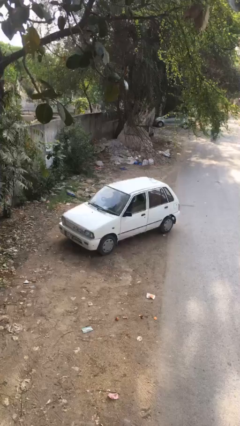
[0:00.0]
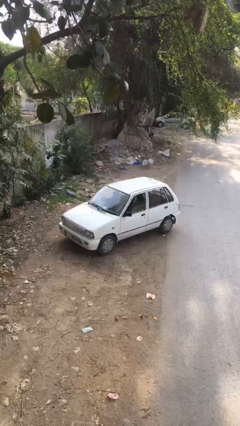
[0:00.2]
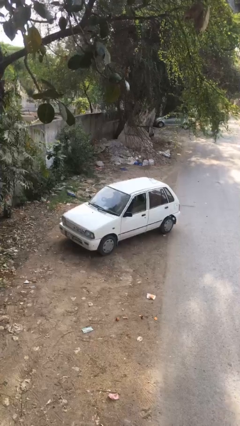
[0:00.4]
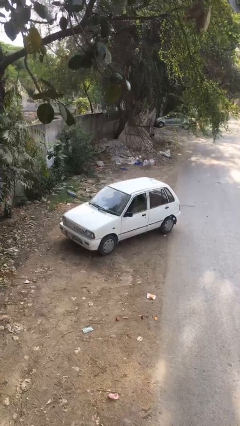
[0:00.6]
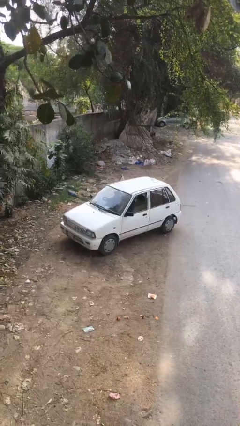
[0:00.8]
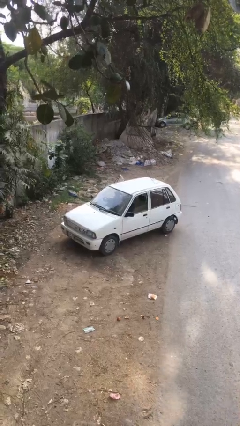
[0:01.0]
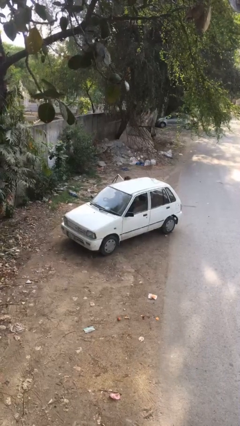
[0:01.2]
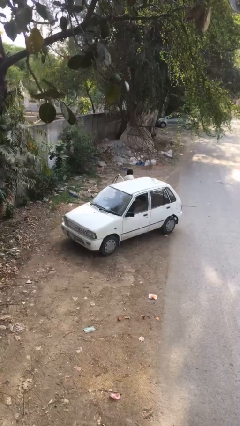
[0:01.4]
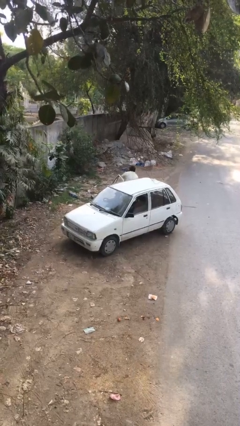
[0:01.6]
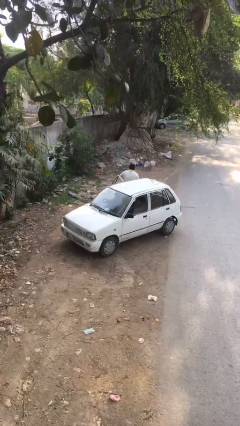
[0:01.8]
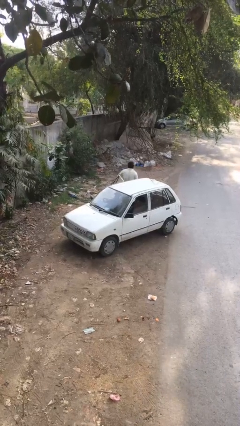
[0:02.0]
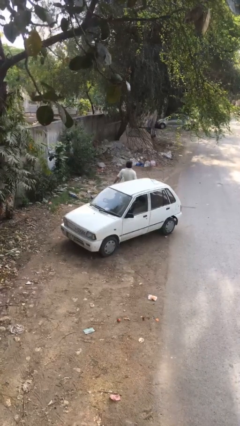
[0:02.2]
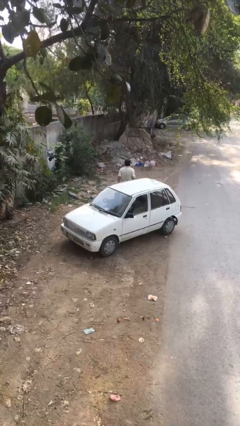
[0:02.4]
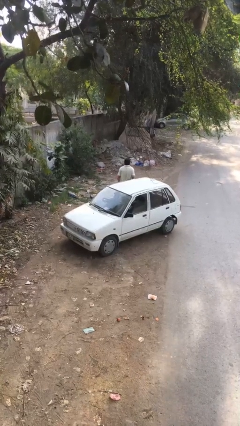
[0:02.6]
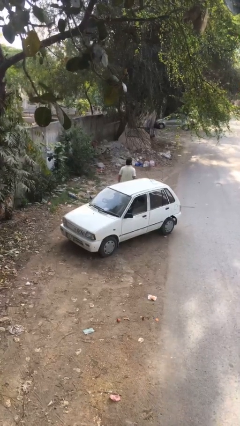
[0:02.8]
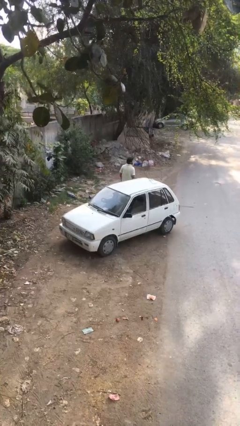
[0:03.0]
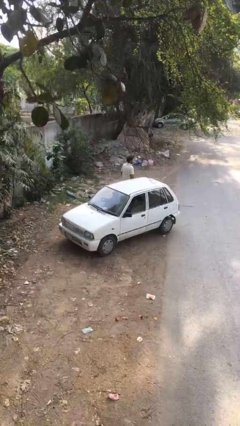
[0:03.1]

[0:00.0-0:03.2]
car drops off person

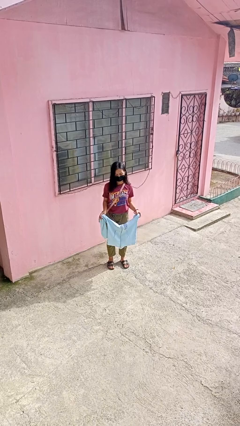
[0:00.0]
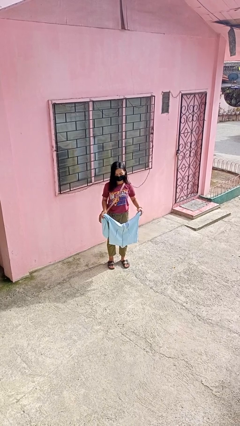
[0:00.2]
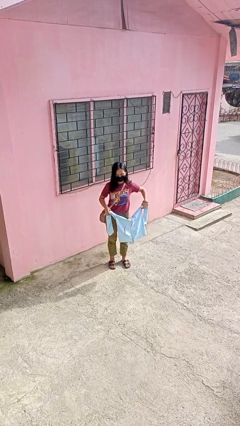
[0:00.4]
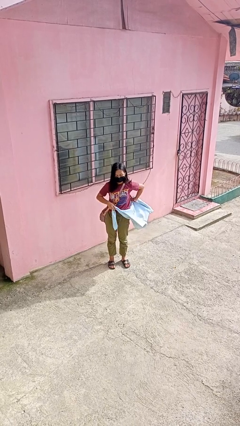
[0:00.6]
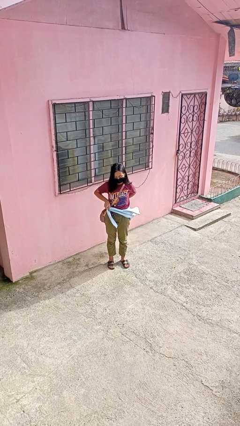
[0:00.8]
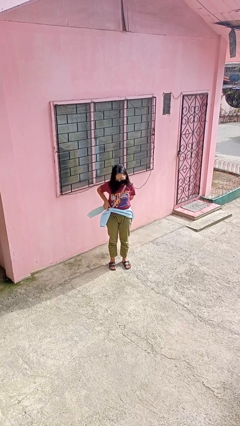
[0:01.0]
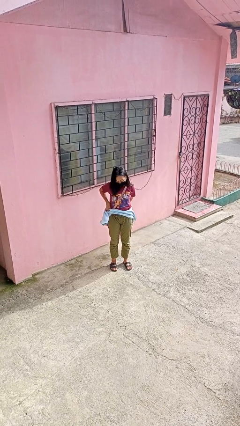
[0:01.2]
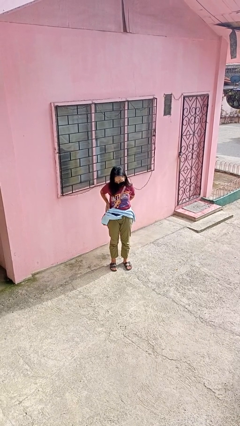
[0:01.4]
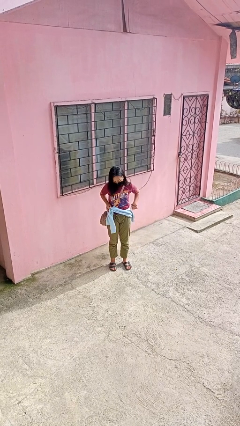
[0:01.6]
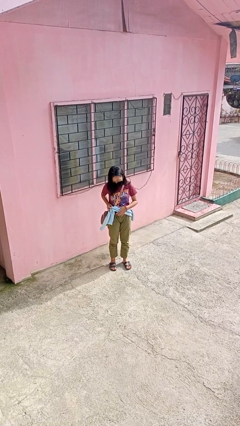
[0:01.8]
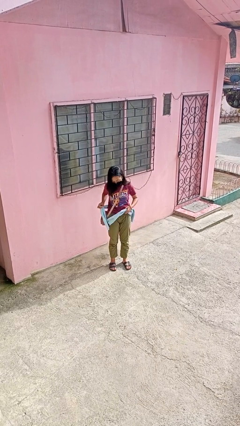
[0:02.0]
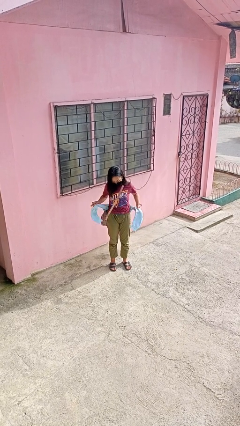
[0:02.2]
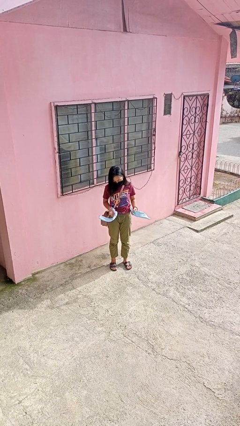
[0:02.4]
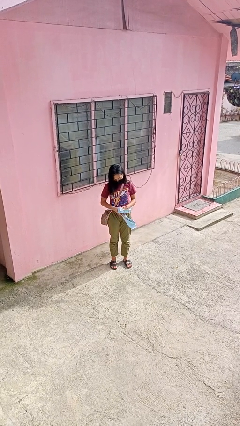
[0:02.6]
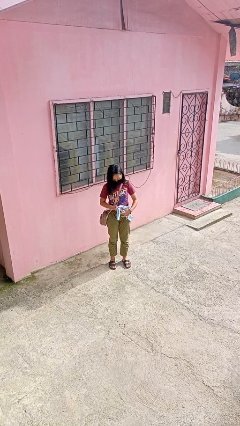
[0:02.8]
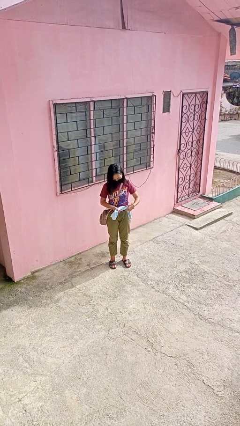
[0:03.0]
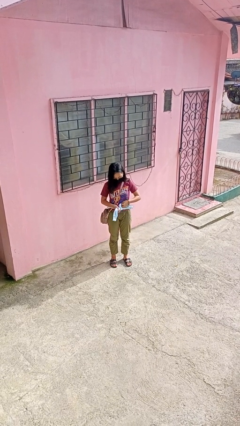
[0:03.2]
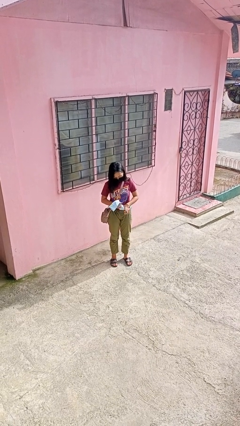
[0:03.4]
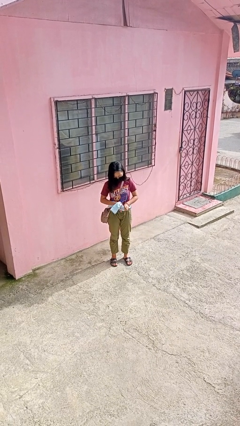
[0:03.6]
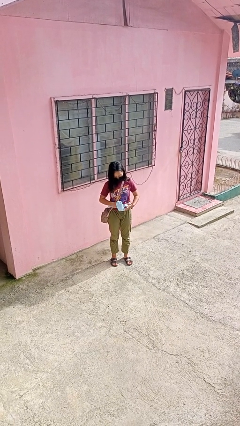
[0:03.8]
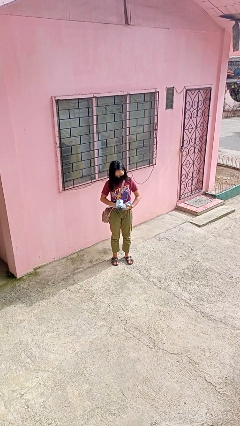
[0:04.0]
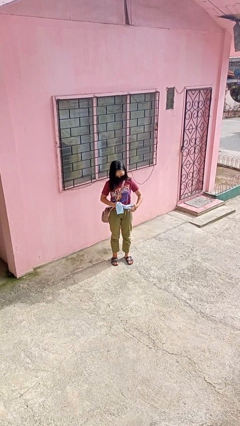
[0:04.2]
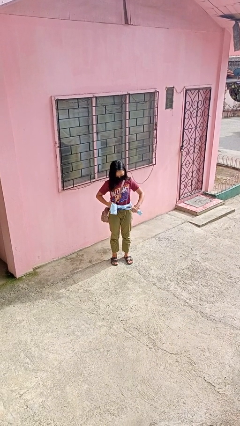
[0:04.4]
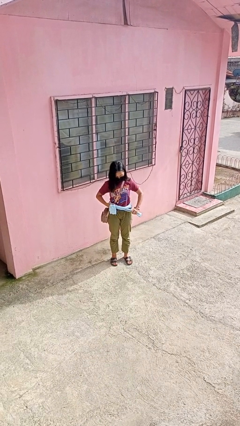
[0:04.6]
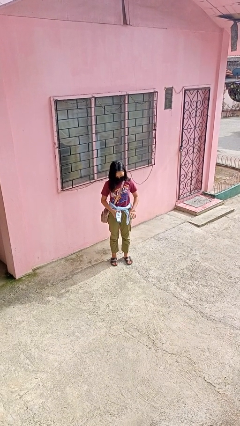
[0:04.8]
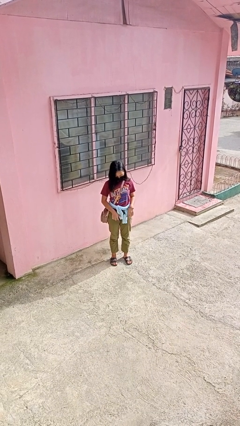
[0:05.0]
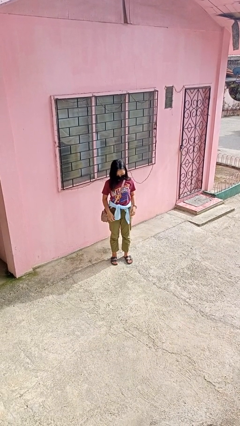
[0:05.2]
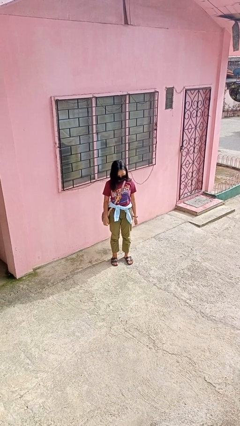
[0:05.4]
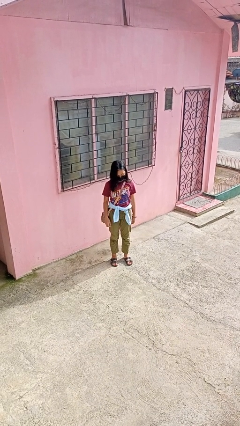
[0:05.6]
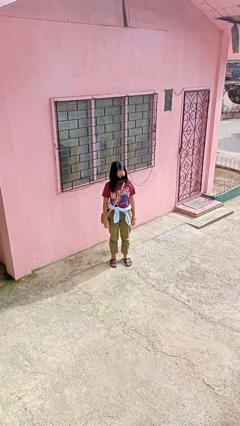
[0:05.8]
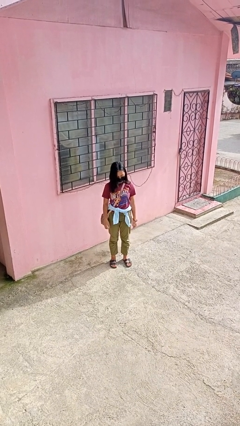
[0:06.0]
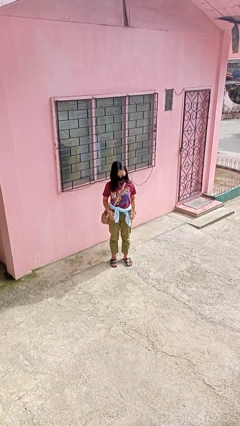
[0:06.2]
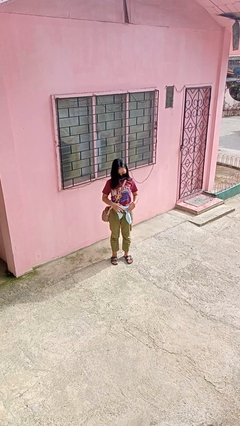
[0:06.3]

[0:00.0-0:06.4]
person ties jacket around waist

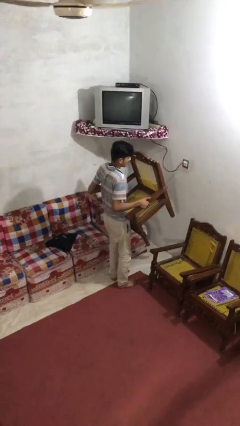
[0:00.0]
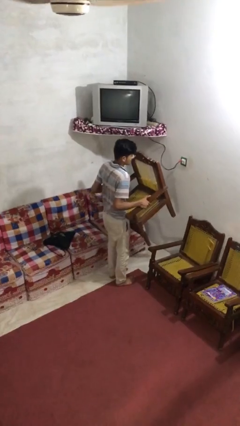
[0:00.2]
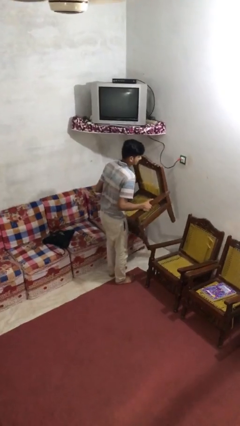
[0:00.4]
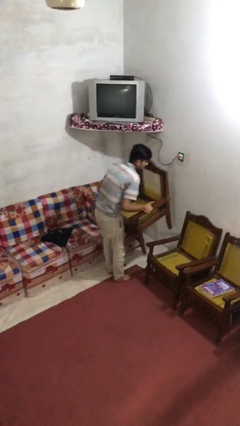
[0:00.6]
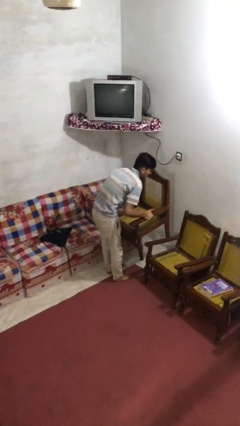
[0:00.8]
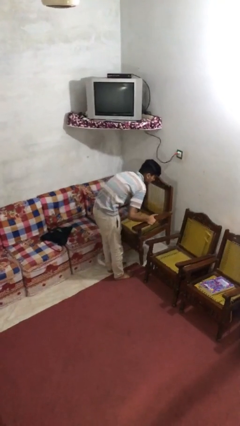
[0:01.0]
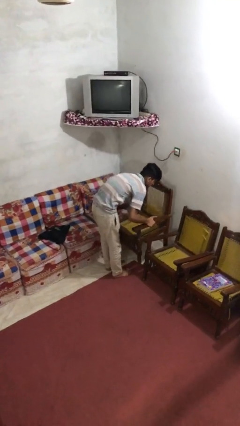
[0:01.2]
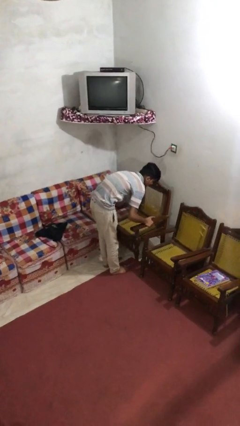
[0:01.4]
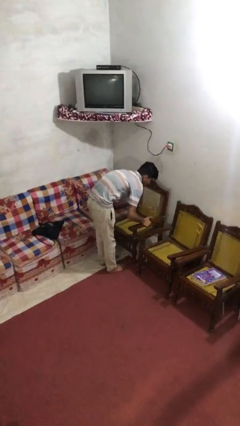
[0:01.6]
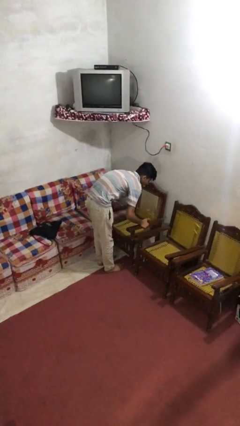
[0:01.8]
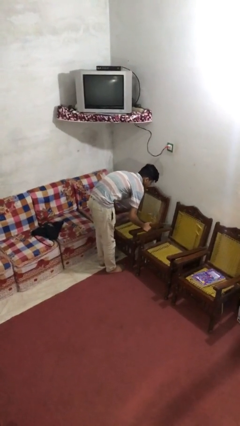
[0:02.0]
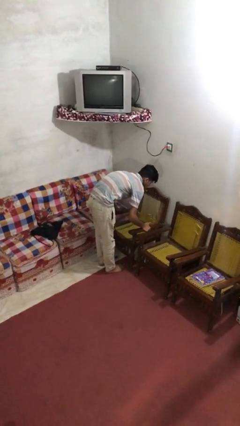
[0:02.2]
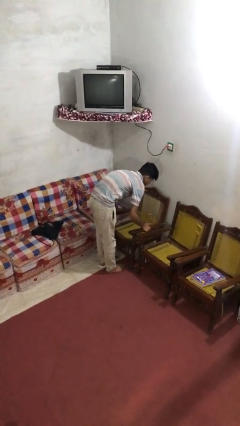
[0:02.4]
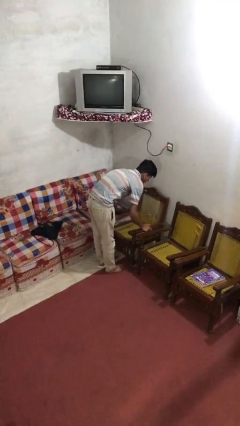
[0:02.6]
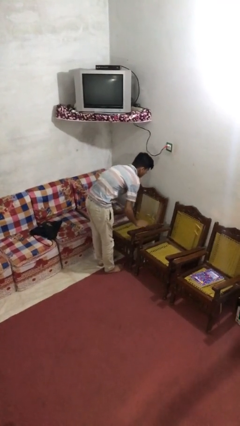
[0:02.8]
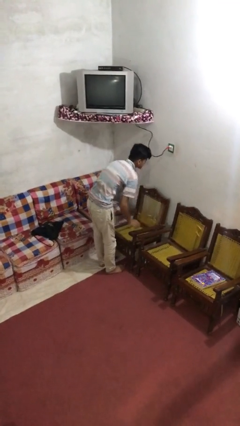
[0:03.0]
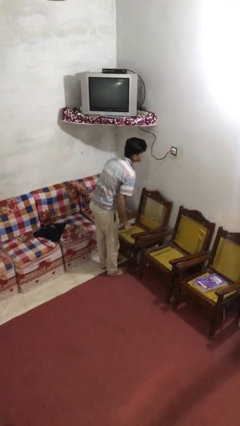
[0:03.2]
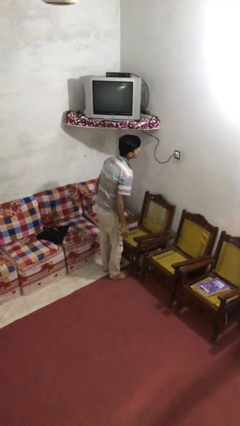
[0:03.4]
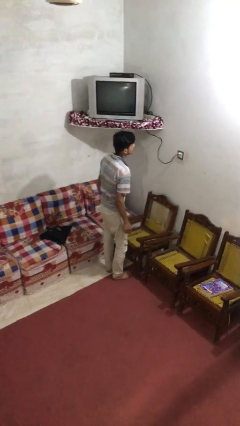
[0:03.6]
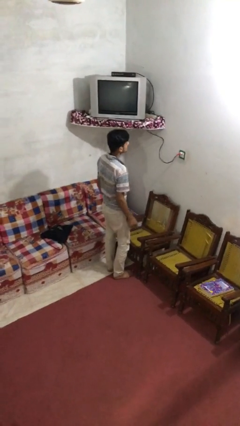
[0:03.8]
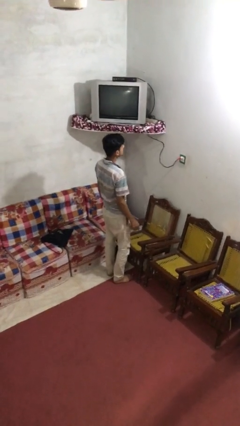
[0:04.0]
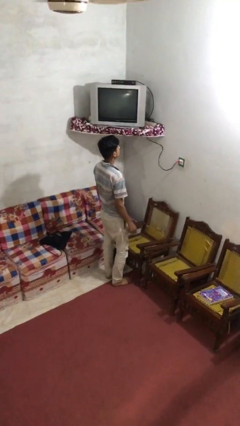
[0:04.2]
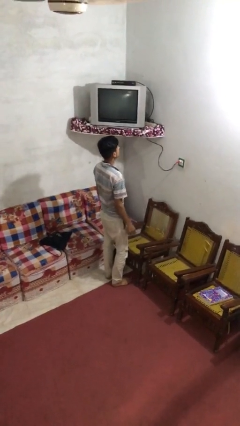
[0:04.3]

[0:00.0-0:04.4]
person puts down object on floor

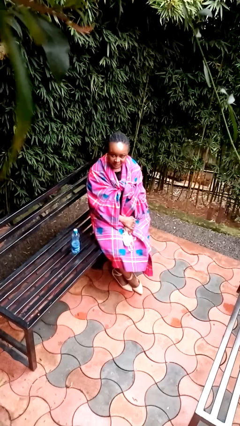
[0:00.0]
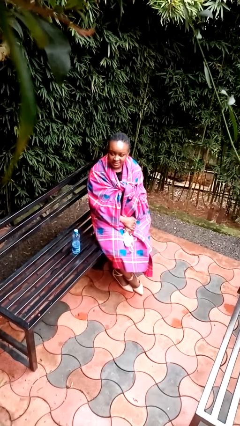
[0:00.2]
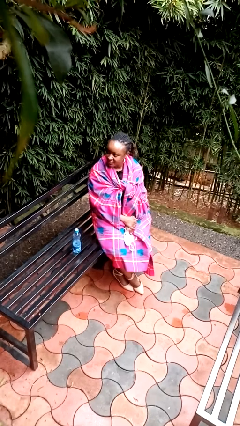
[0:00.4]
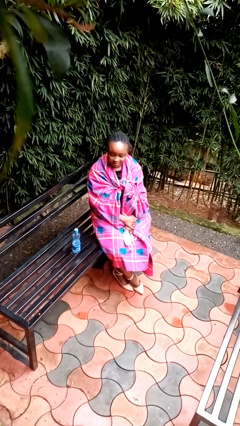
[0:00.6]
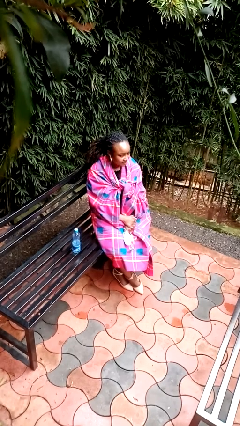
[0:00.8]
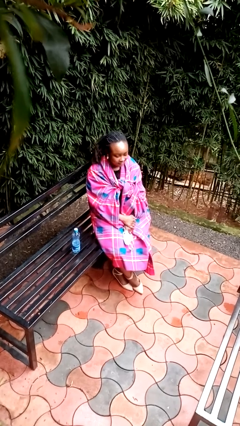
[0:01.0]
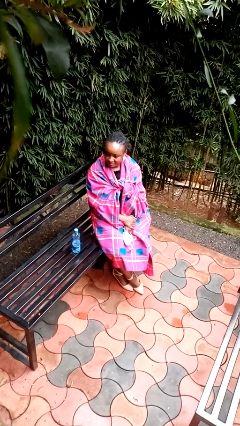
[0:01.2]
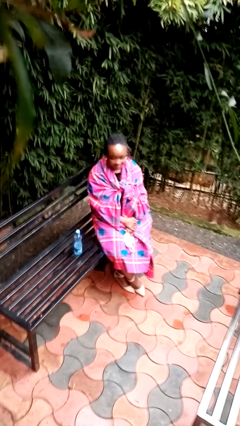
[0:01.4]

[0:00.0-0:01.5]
person shakes head

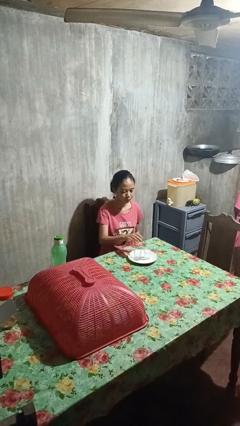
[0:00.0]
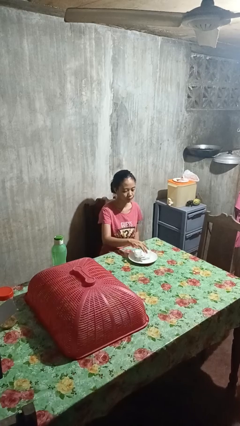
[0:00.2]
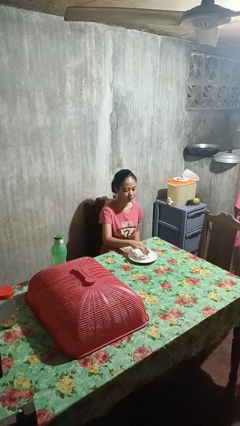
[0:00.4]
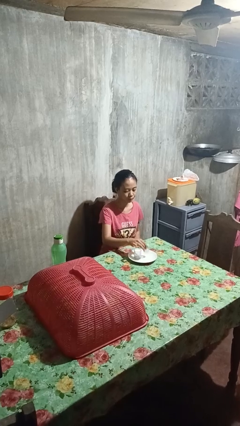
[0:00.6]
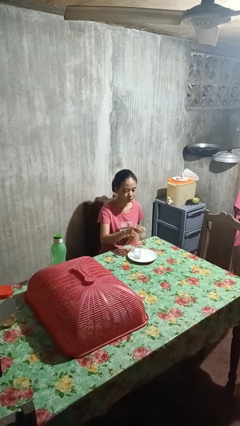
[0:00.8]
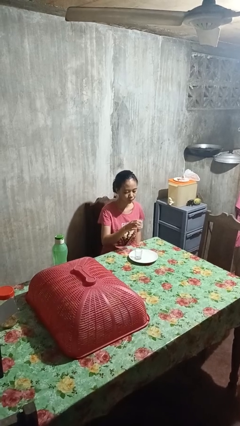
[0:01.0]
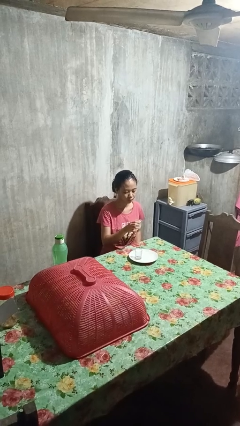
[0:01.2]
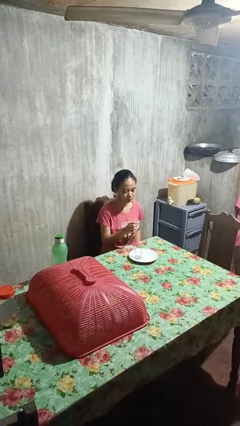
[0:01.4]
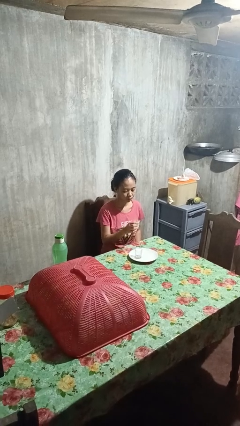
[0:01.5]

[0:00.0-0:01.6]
person picks up object from table

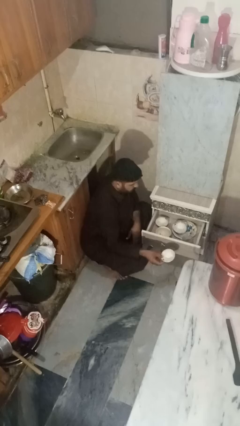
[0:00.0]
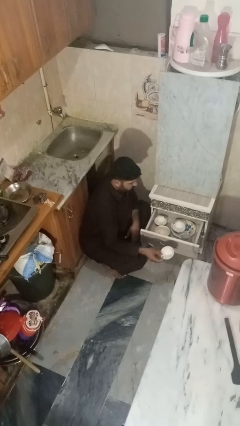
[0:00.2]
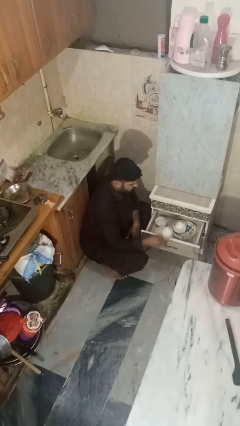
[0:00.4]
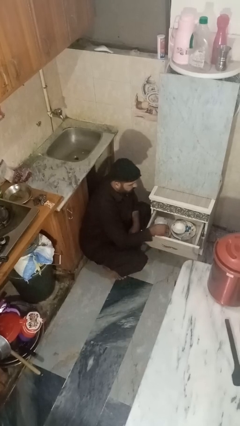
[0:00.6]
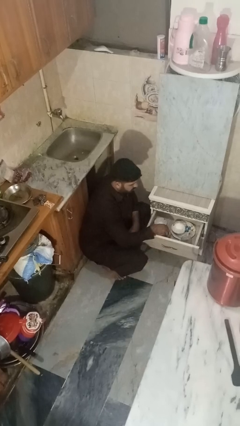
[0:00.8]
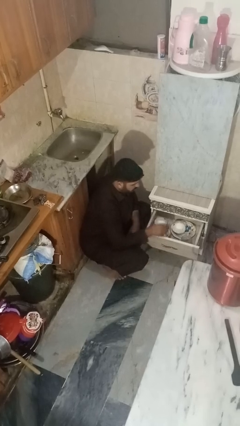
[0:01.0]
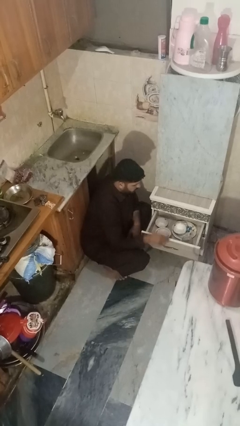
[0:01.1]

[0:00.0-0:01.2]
person puts object into kitchen drawer
